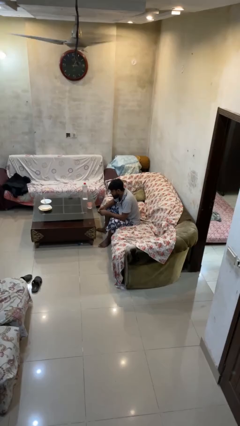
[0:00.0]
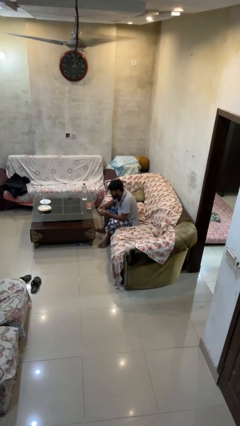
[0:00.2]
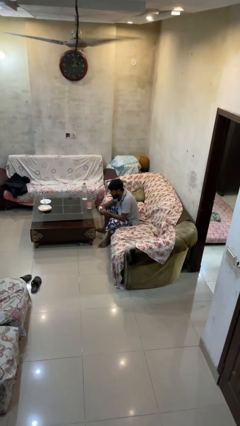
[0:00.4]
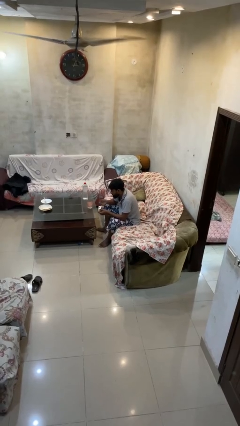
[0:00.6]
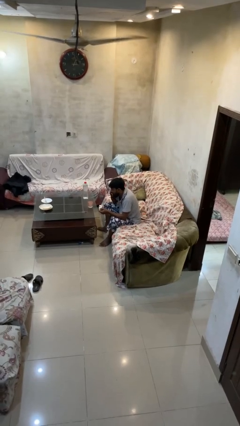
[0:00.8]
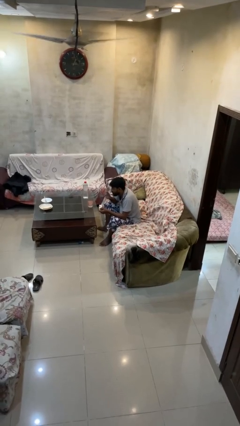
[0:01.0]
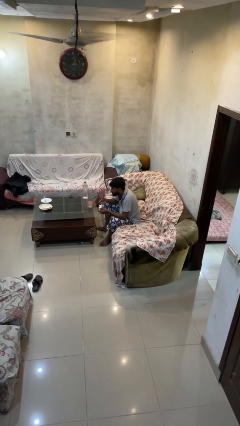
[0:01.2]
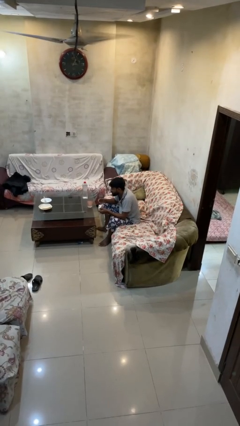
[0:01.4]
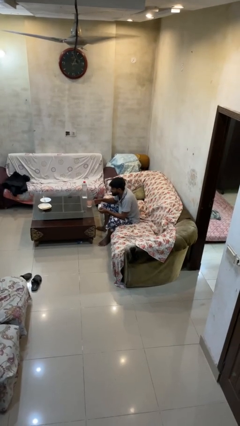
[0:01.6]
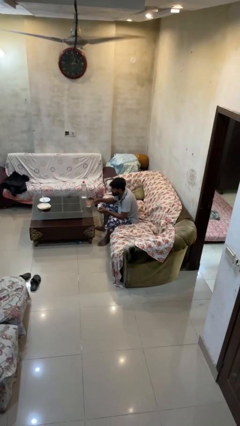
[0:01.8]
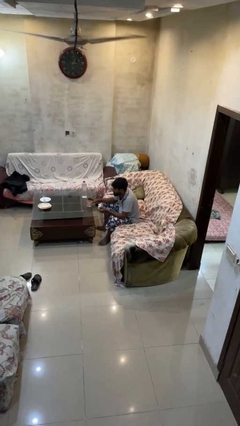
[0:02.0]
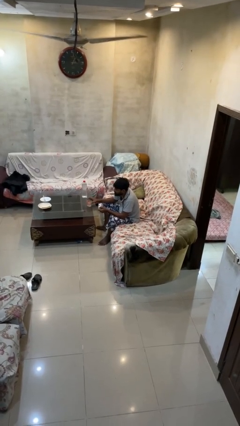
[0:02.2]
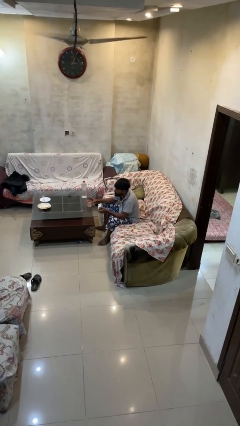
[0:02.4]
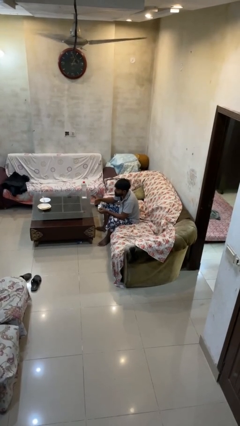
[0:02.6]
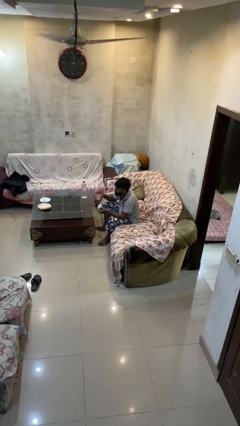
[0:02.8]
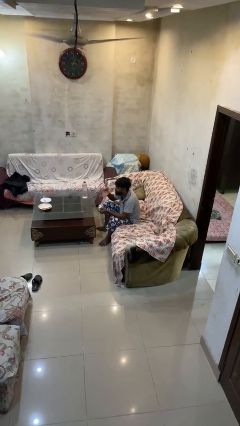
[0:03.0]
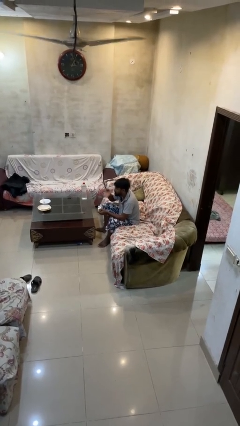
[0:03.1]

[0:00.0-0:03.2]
person takes medicine pills

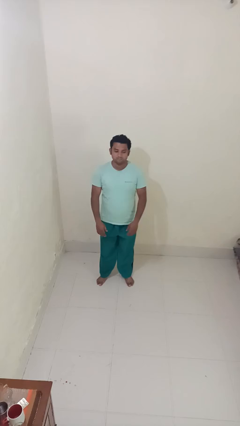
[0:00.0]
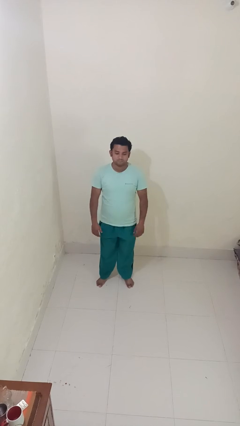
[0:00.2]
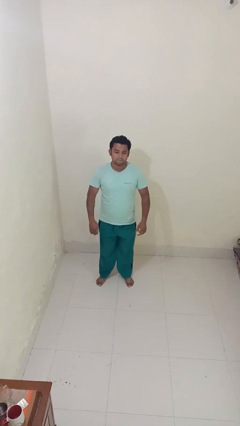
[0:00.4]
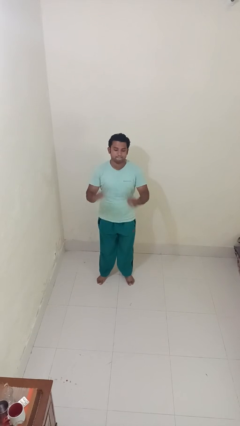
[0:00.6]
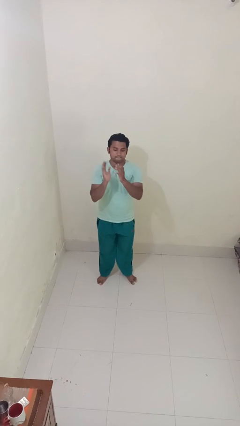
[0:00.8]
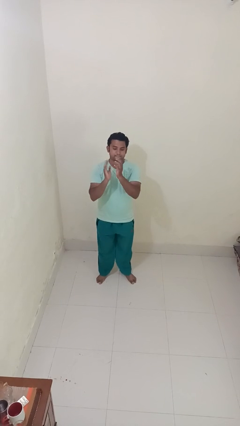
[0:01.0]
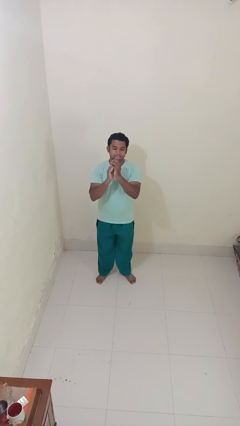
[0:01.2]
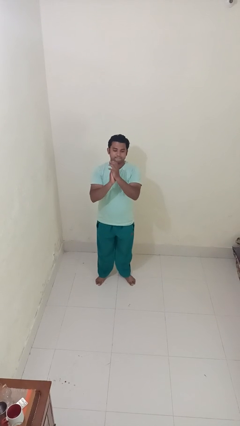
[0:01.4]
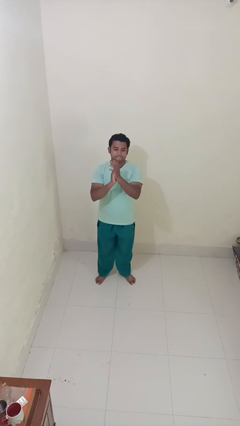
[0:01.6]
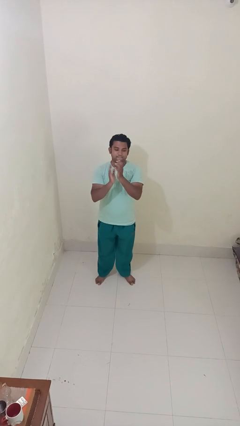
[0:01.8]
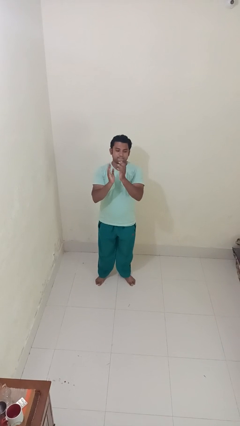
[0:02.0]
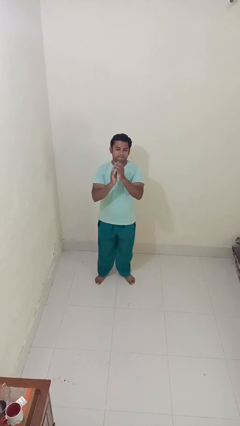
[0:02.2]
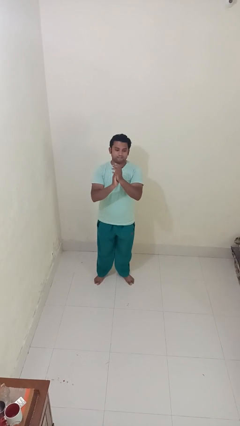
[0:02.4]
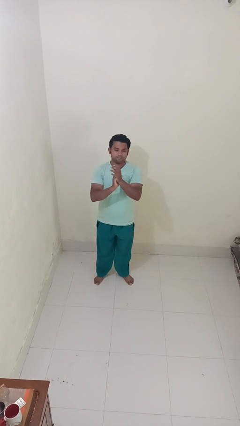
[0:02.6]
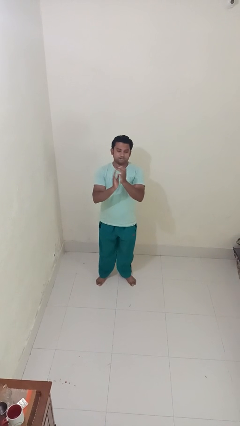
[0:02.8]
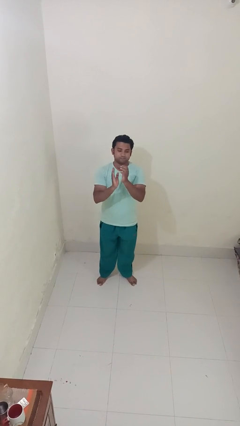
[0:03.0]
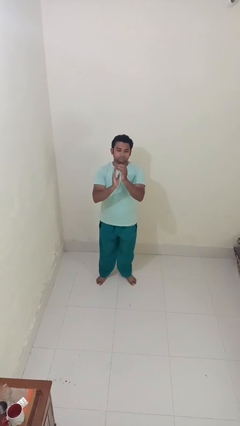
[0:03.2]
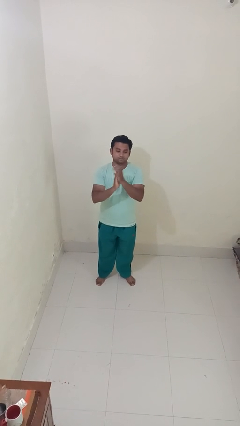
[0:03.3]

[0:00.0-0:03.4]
person claps hands

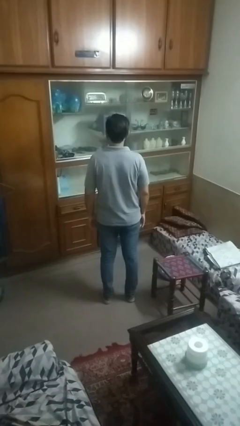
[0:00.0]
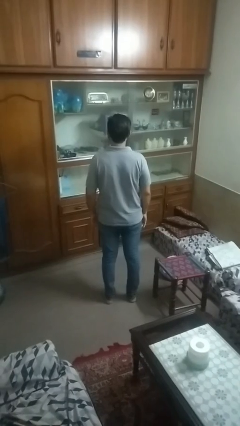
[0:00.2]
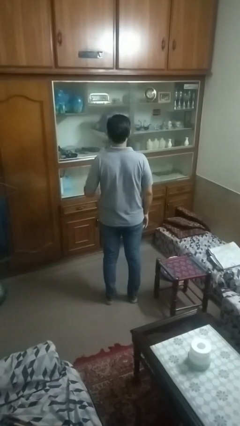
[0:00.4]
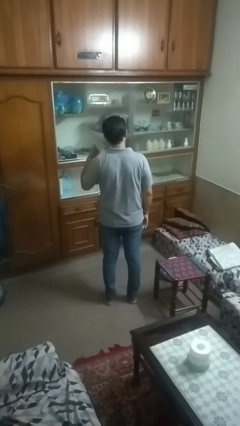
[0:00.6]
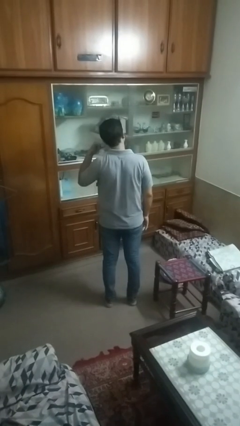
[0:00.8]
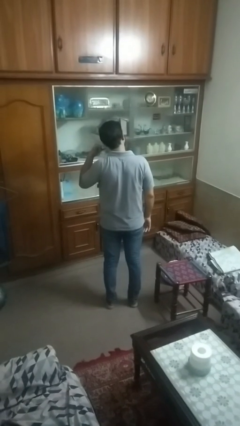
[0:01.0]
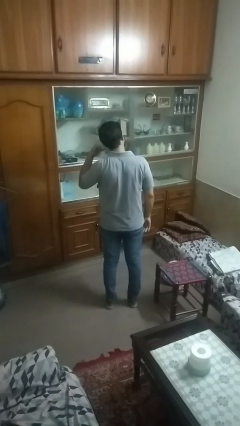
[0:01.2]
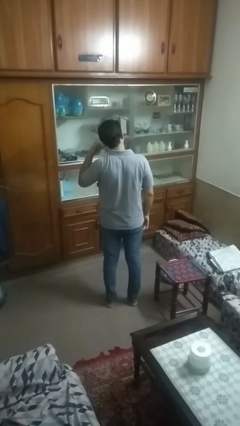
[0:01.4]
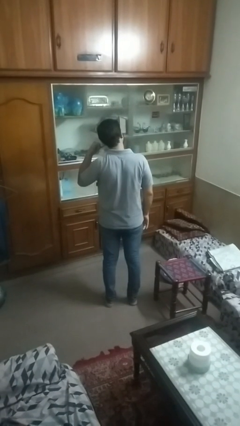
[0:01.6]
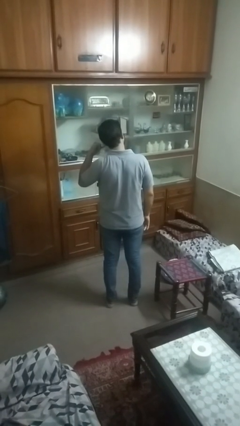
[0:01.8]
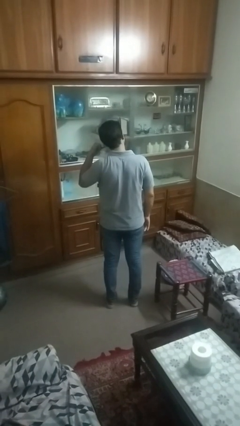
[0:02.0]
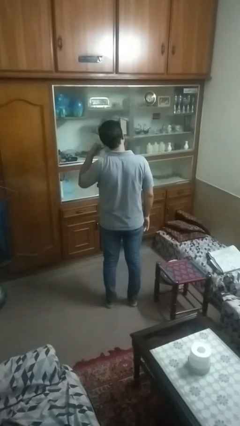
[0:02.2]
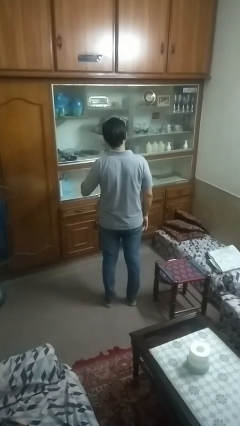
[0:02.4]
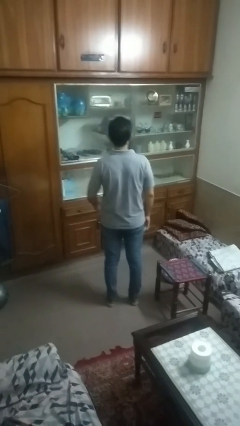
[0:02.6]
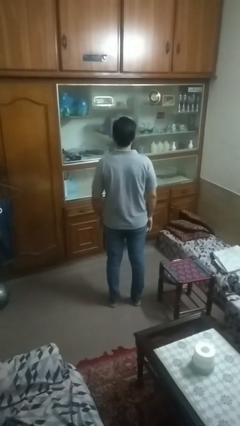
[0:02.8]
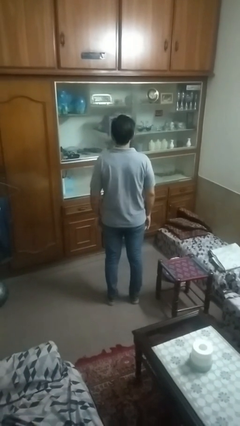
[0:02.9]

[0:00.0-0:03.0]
person gestures call me

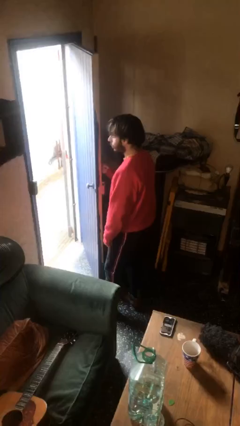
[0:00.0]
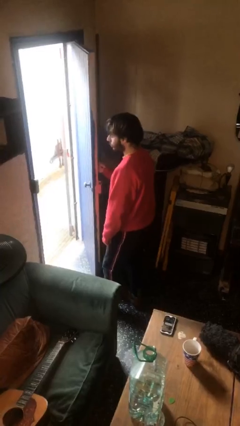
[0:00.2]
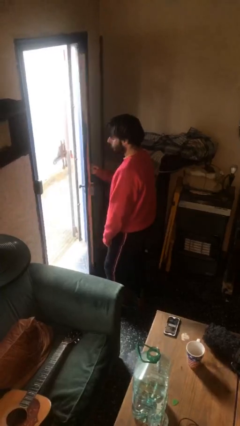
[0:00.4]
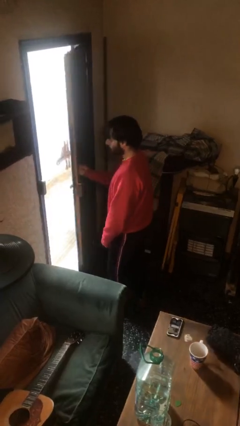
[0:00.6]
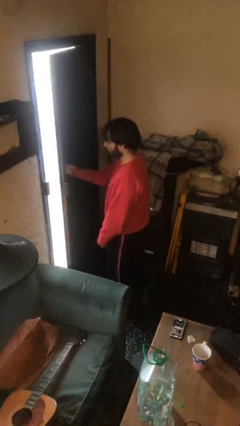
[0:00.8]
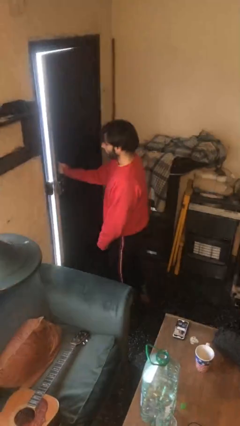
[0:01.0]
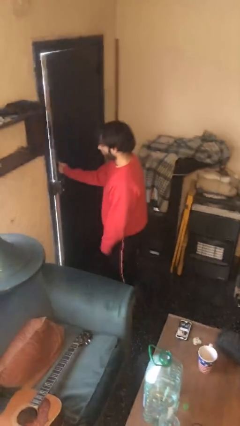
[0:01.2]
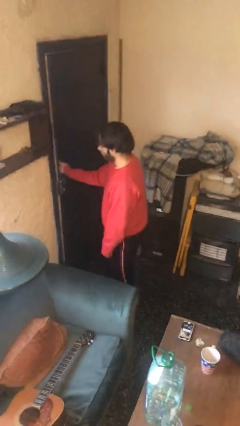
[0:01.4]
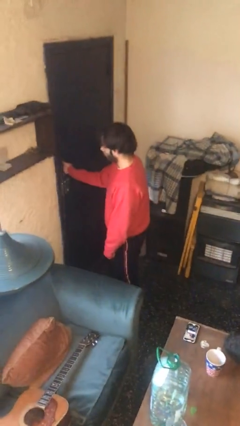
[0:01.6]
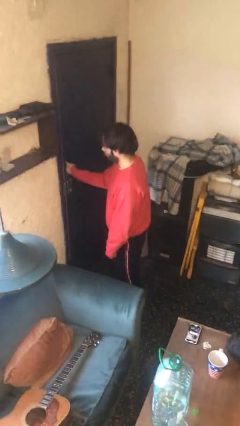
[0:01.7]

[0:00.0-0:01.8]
person closes facility door

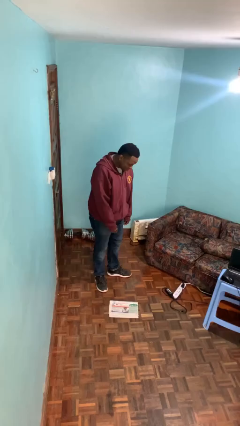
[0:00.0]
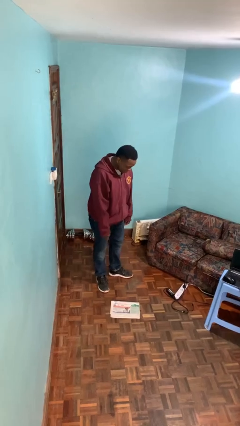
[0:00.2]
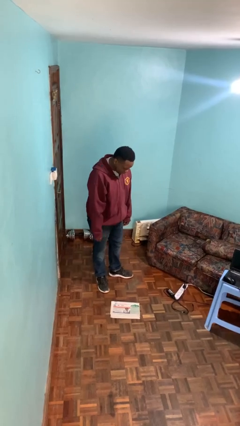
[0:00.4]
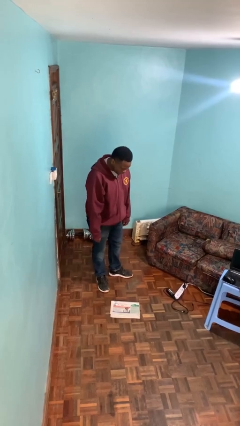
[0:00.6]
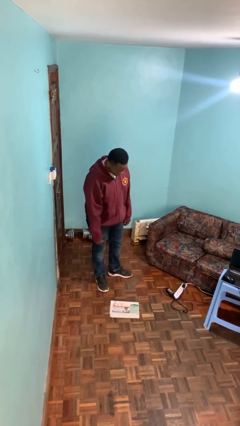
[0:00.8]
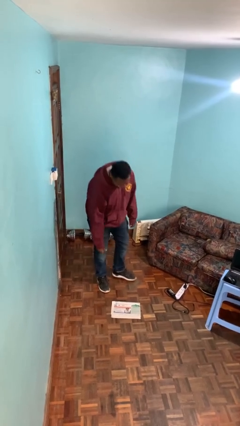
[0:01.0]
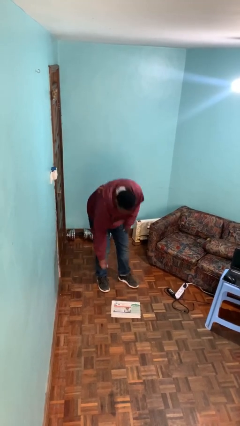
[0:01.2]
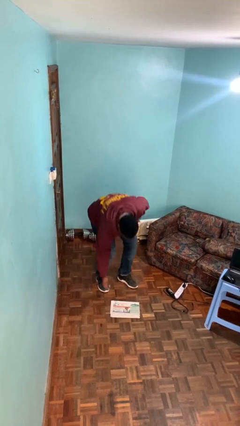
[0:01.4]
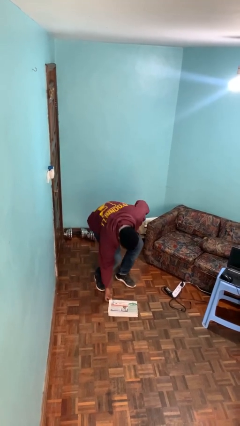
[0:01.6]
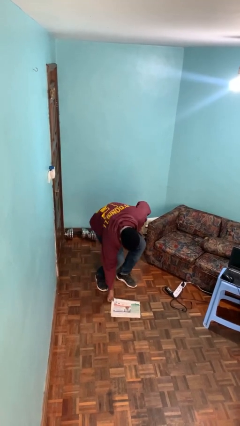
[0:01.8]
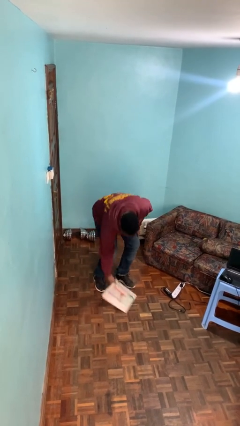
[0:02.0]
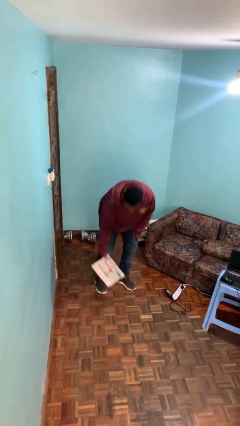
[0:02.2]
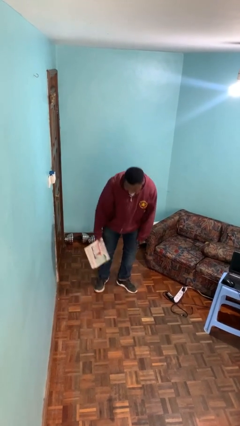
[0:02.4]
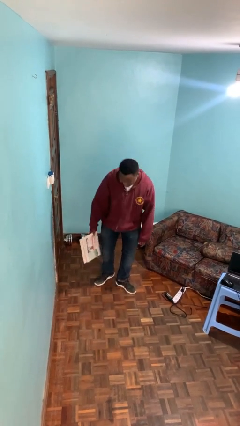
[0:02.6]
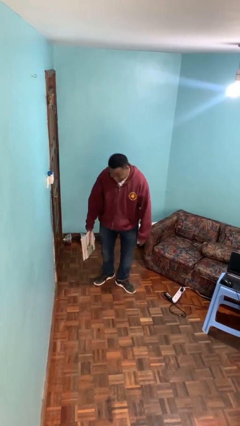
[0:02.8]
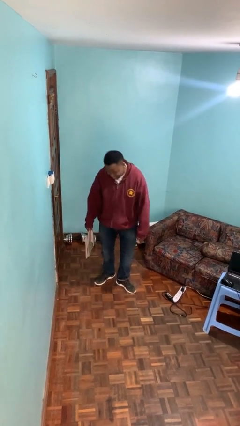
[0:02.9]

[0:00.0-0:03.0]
person picks up object from floor

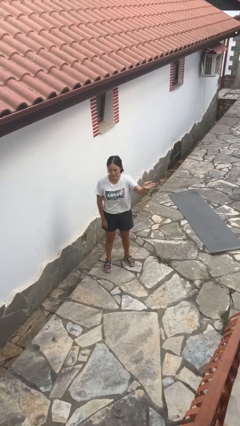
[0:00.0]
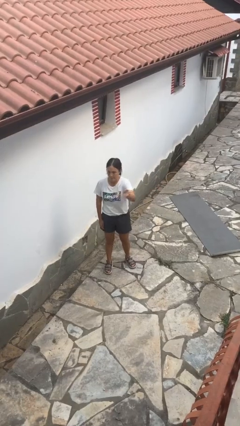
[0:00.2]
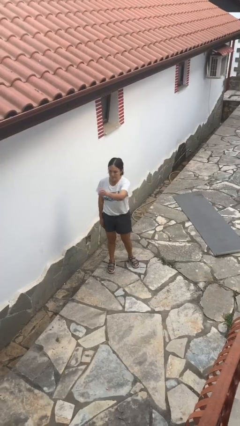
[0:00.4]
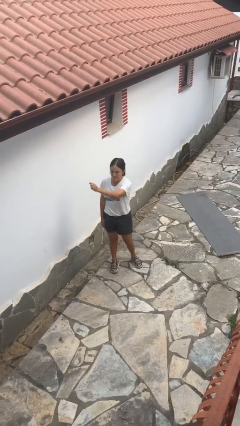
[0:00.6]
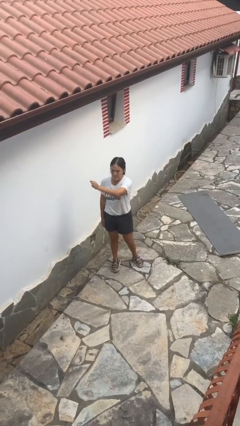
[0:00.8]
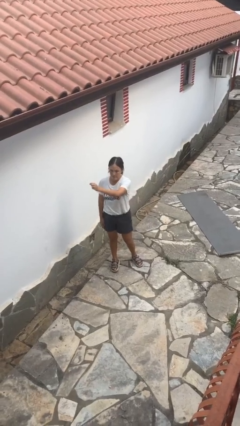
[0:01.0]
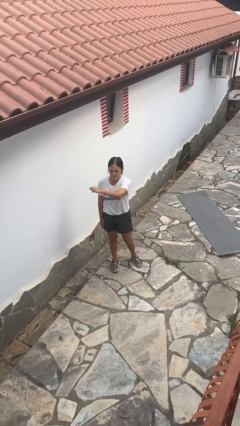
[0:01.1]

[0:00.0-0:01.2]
person gestures swipe right

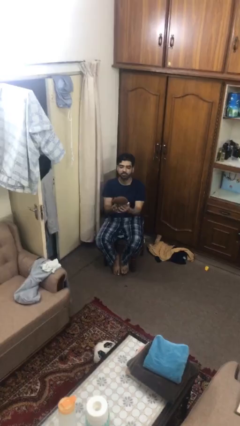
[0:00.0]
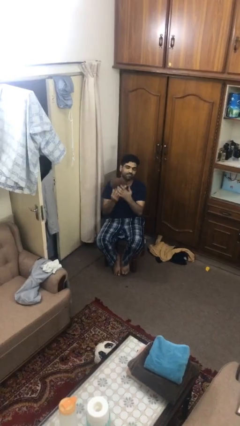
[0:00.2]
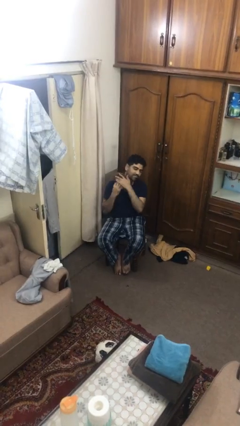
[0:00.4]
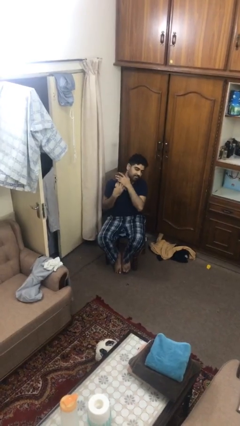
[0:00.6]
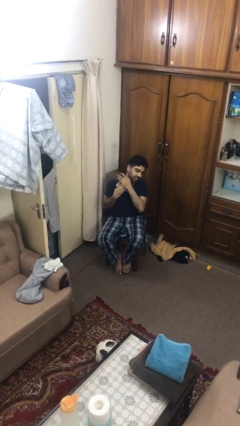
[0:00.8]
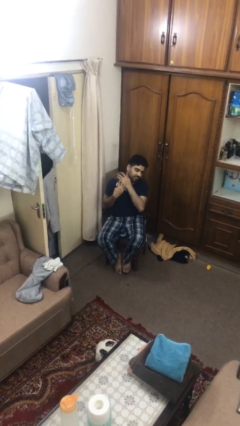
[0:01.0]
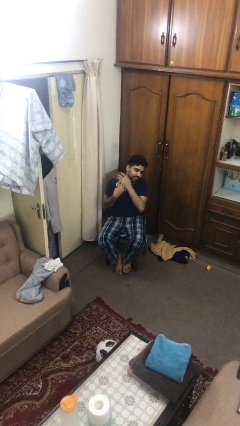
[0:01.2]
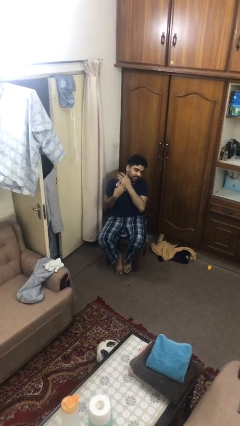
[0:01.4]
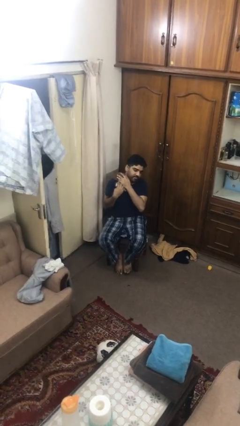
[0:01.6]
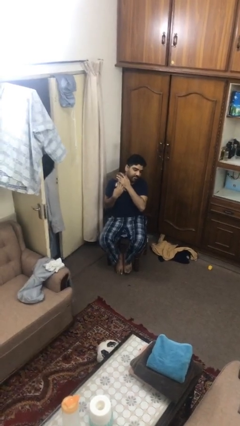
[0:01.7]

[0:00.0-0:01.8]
person hugs stuffed animal
